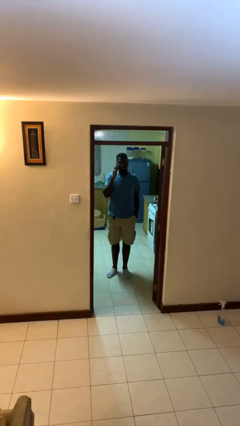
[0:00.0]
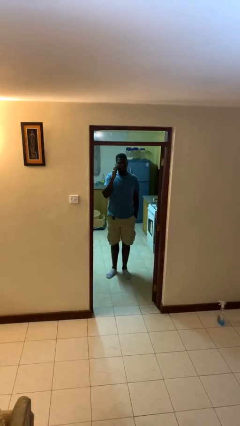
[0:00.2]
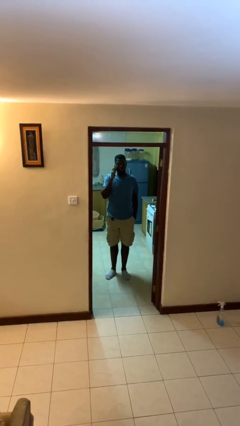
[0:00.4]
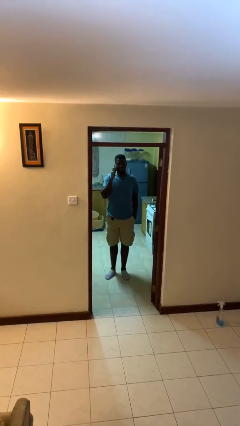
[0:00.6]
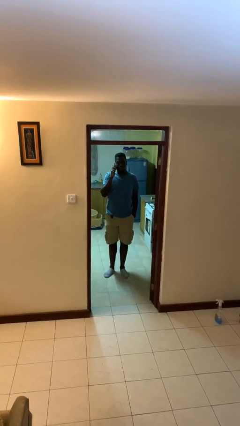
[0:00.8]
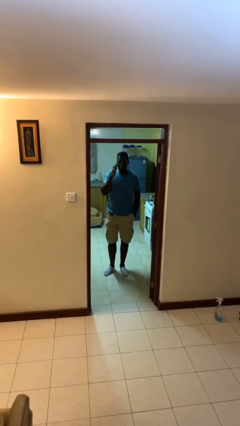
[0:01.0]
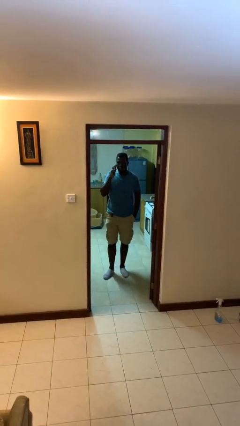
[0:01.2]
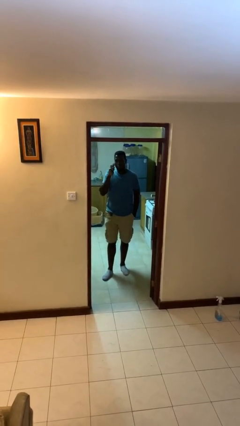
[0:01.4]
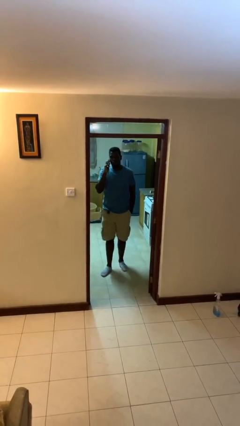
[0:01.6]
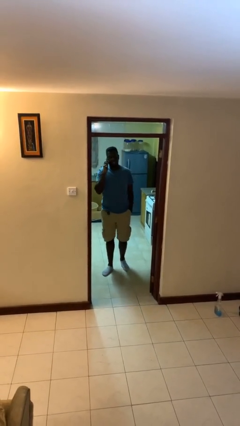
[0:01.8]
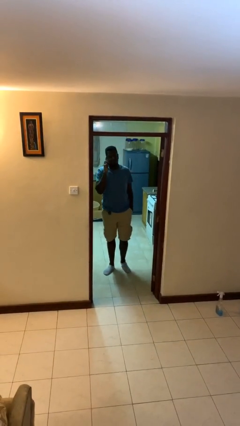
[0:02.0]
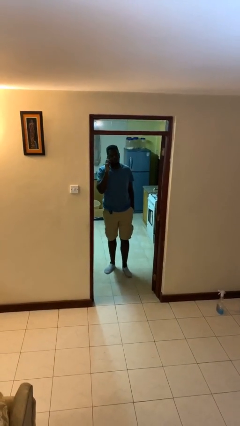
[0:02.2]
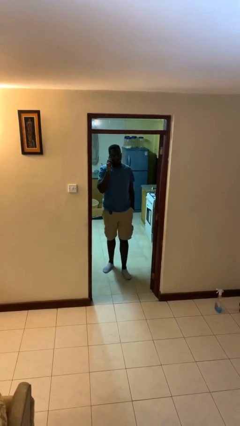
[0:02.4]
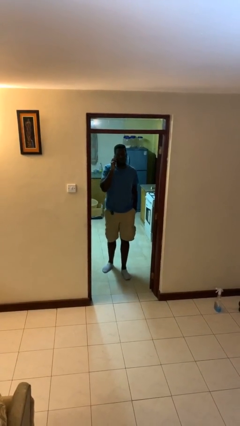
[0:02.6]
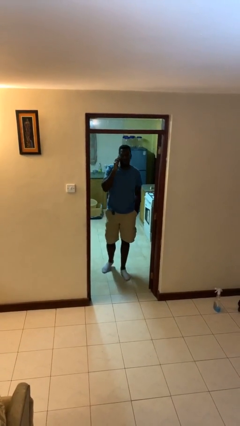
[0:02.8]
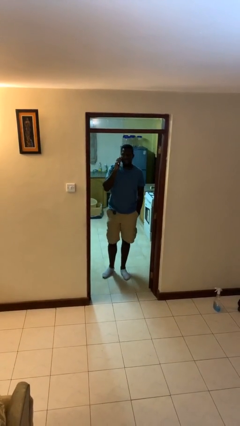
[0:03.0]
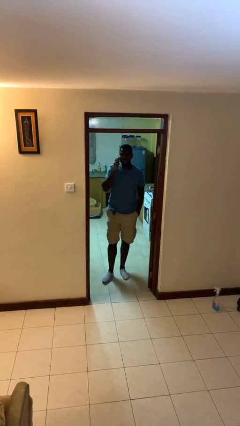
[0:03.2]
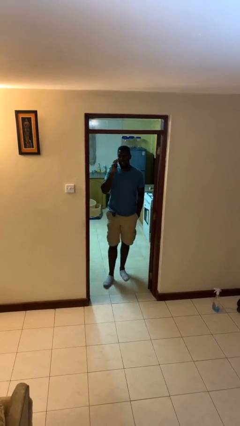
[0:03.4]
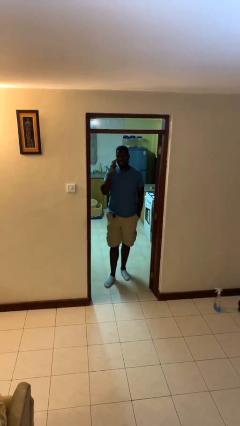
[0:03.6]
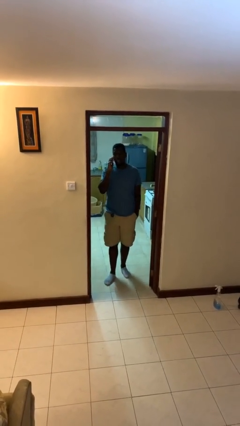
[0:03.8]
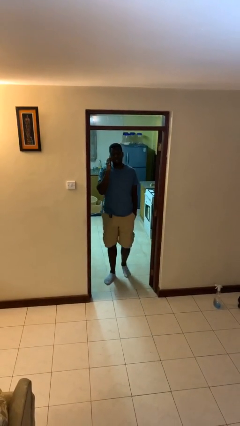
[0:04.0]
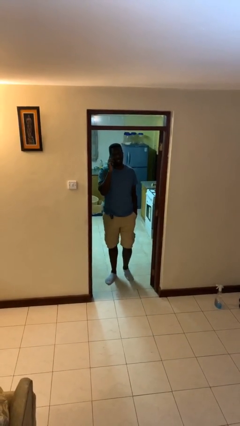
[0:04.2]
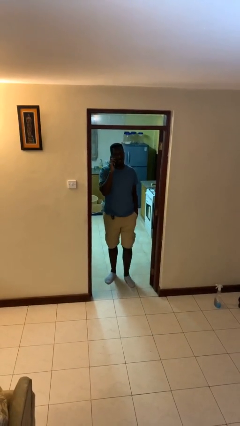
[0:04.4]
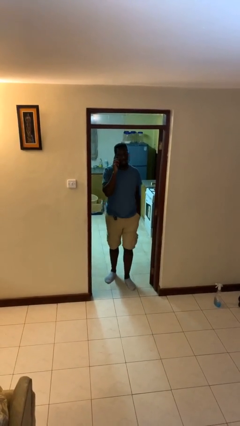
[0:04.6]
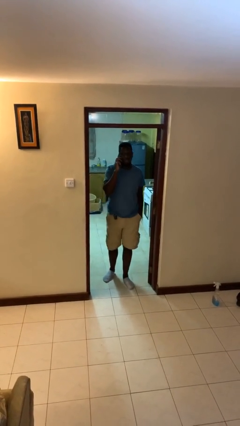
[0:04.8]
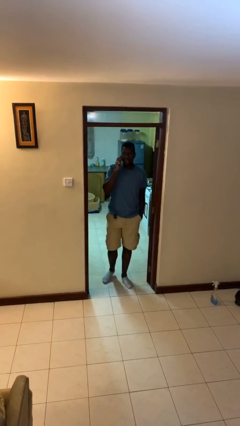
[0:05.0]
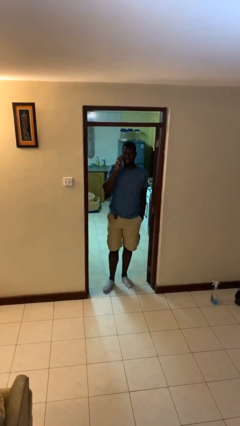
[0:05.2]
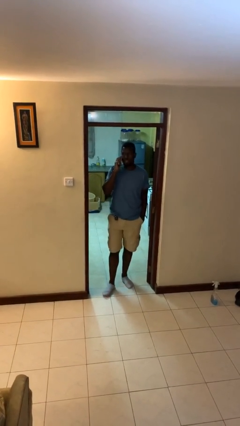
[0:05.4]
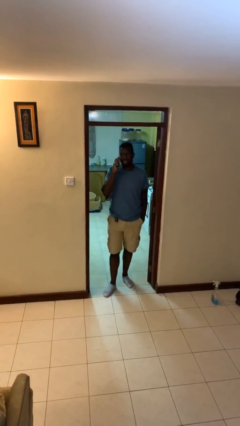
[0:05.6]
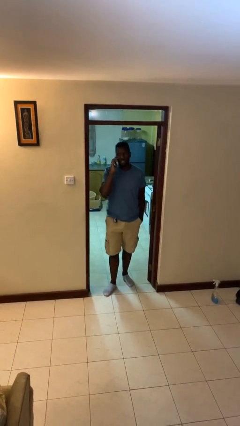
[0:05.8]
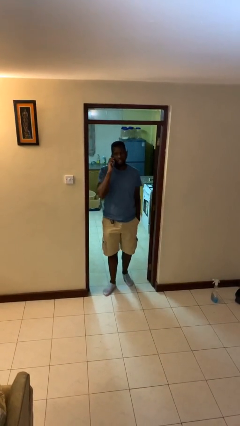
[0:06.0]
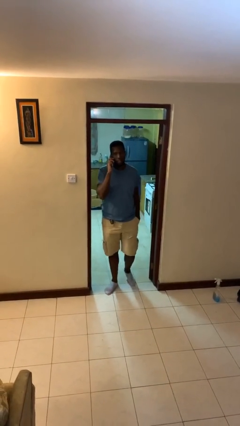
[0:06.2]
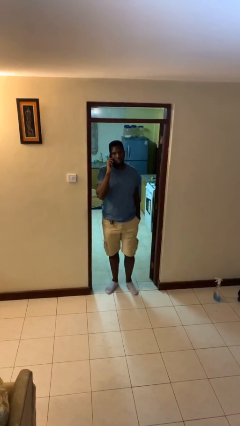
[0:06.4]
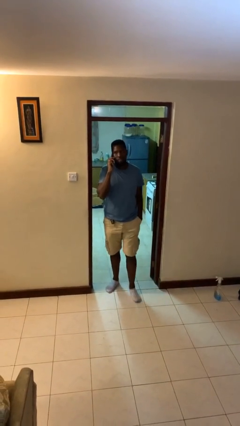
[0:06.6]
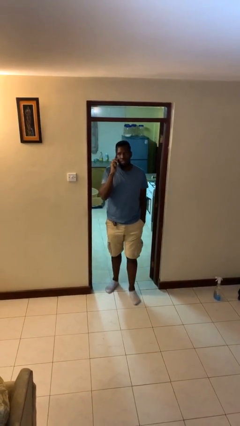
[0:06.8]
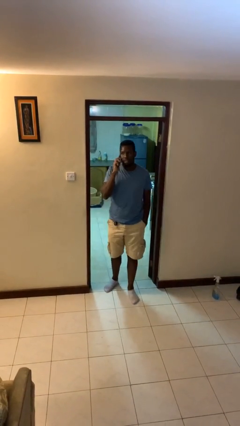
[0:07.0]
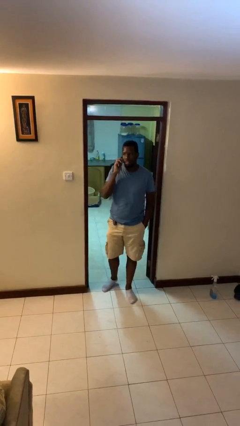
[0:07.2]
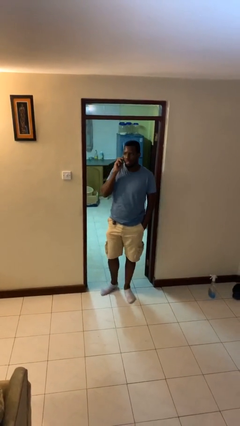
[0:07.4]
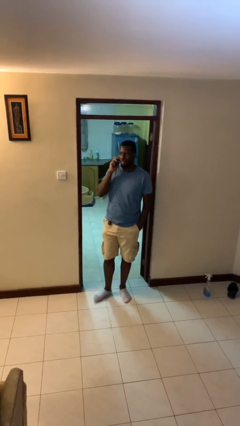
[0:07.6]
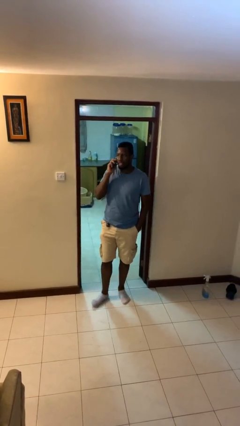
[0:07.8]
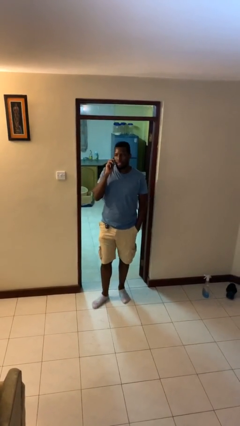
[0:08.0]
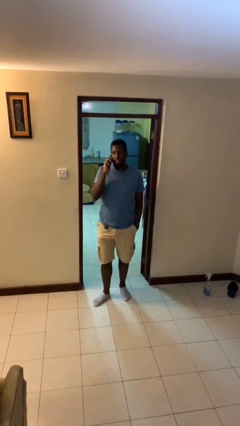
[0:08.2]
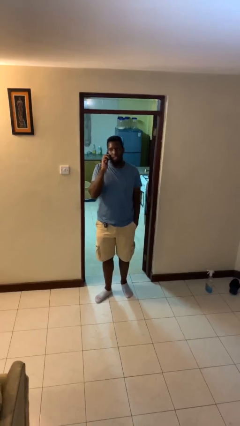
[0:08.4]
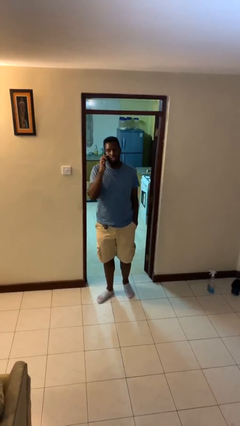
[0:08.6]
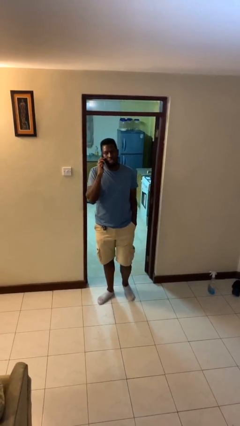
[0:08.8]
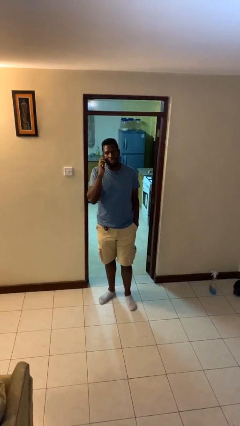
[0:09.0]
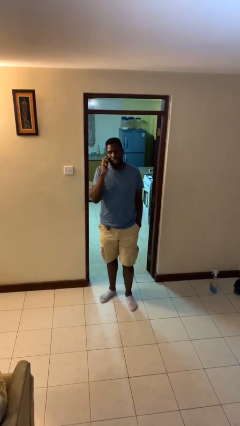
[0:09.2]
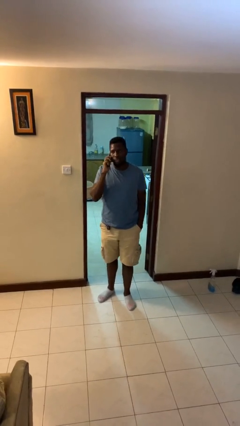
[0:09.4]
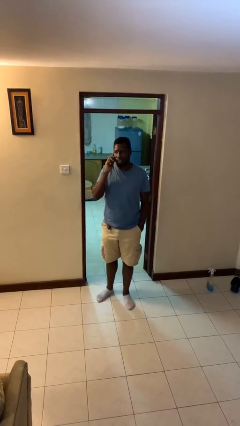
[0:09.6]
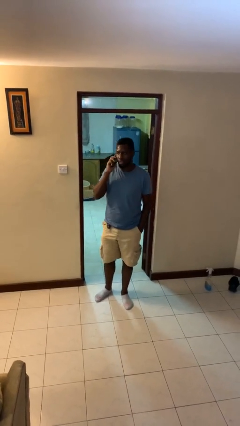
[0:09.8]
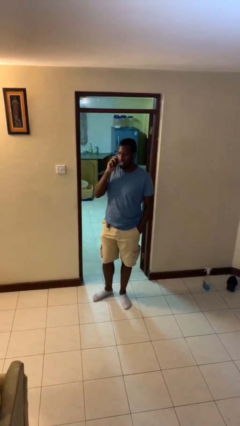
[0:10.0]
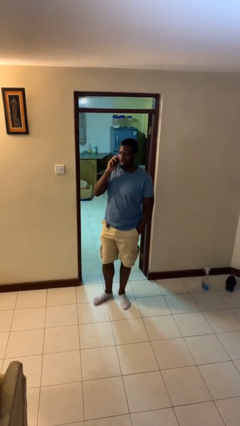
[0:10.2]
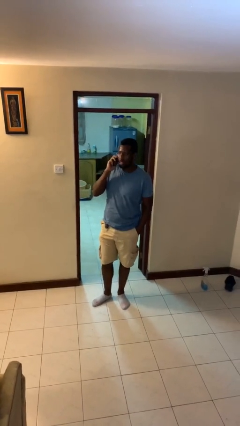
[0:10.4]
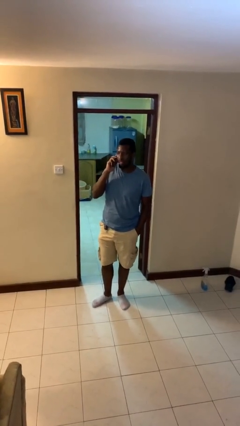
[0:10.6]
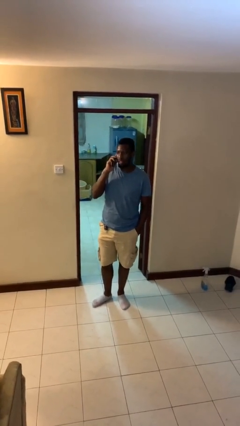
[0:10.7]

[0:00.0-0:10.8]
person enters scene through structure

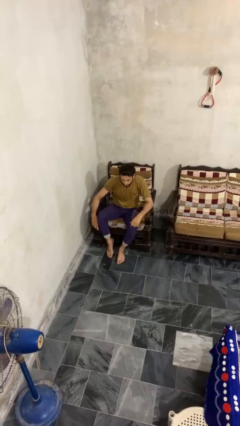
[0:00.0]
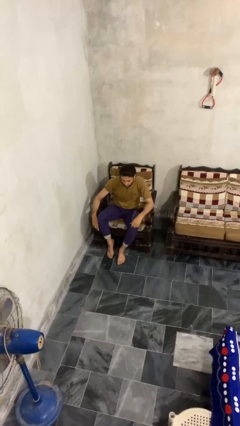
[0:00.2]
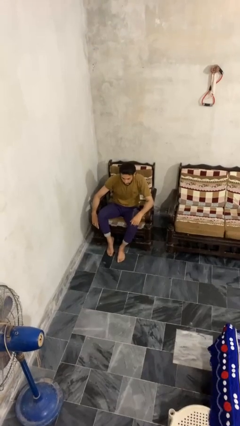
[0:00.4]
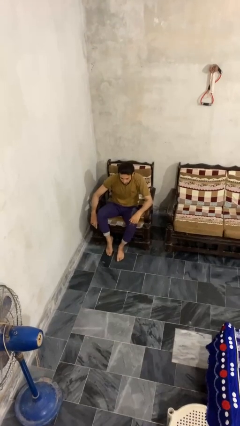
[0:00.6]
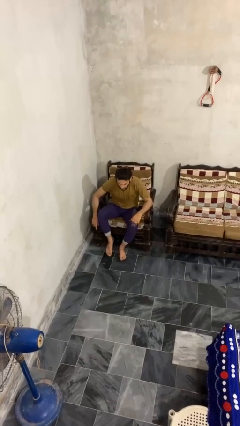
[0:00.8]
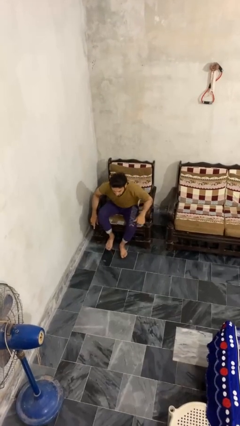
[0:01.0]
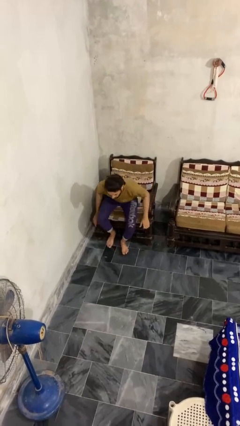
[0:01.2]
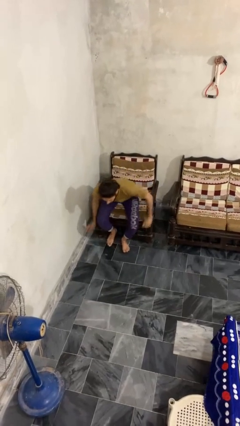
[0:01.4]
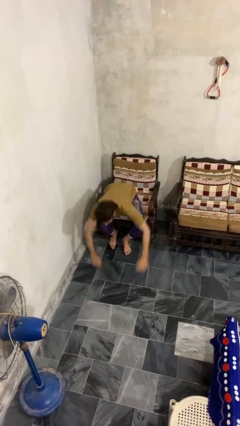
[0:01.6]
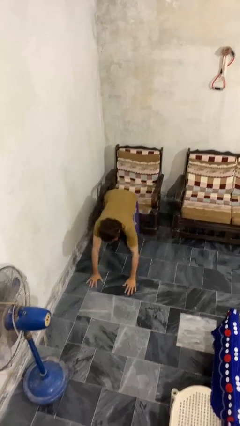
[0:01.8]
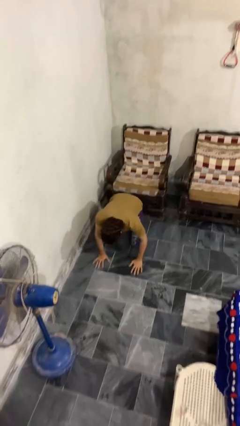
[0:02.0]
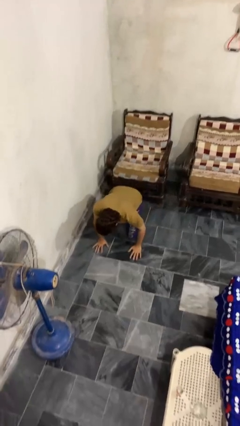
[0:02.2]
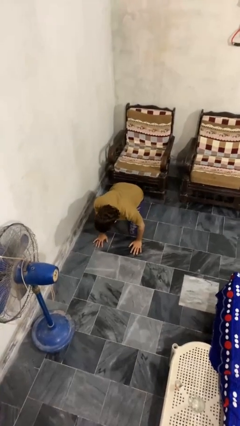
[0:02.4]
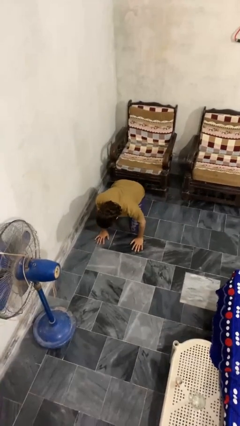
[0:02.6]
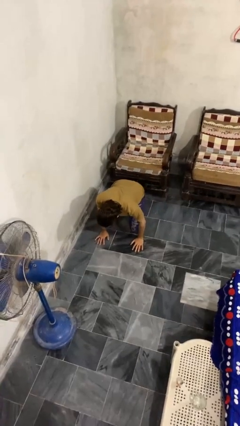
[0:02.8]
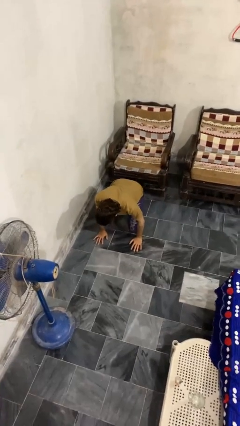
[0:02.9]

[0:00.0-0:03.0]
person falls from chair

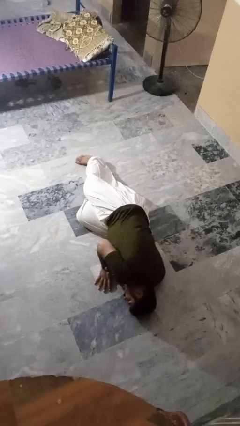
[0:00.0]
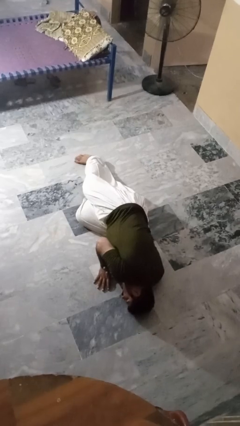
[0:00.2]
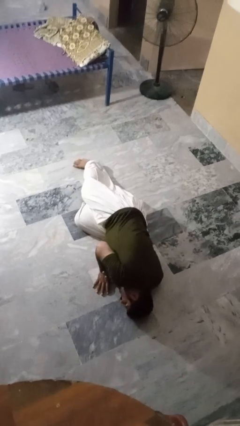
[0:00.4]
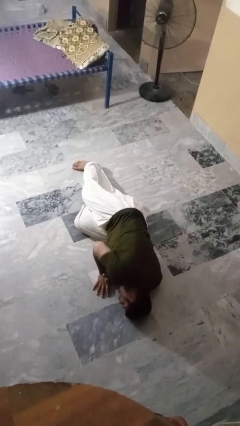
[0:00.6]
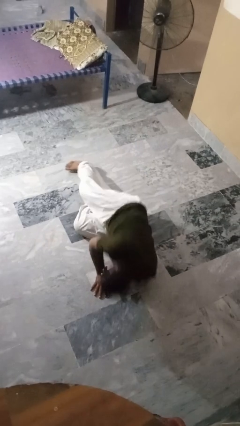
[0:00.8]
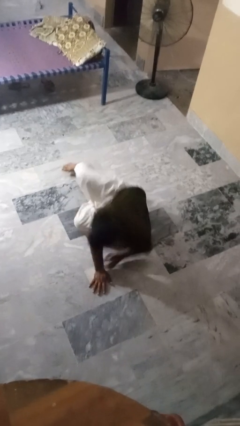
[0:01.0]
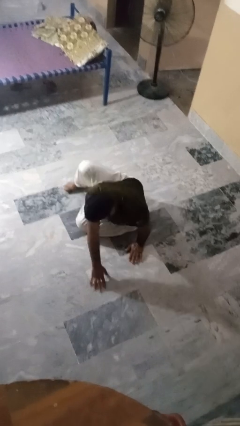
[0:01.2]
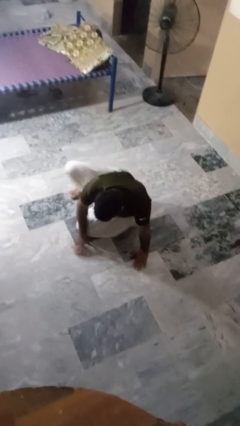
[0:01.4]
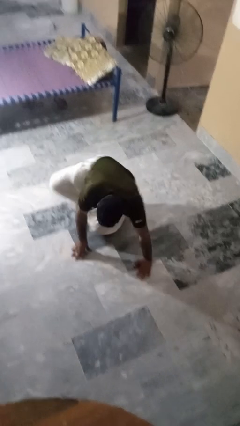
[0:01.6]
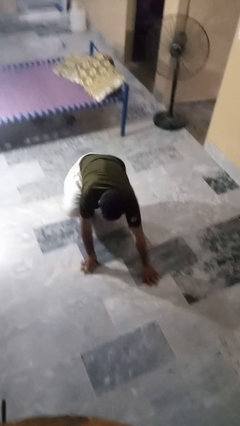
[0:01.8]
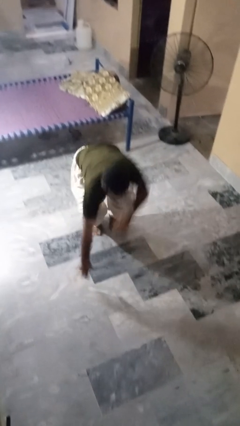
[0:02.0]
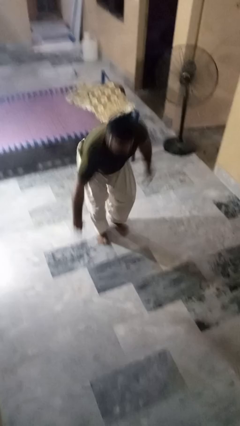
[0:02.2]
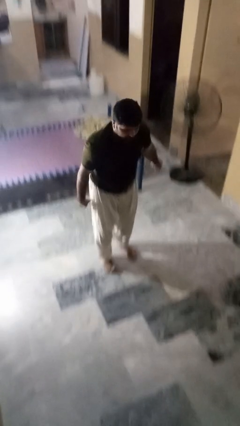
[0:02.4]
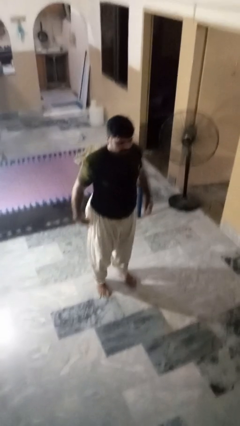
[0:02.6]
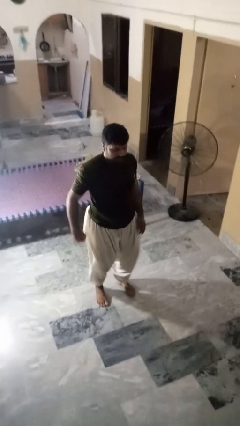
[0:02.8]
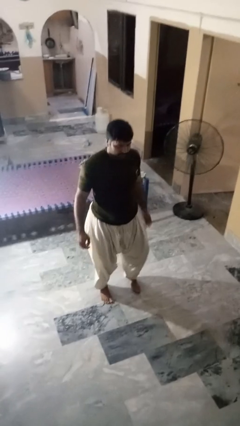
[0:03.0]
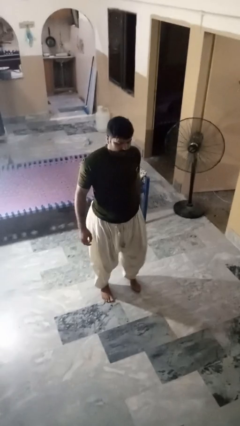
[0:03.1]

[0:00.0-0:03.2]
person stands up from floor

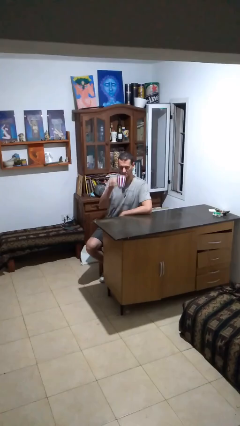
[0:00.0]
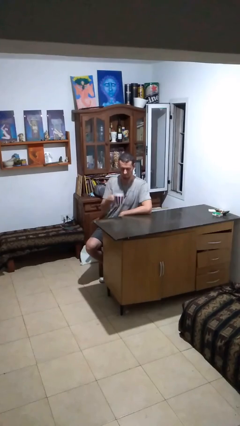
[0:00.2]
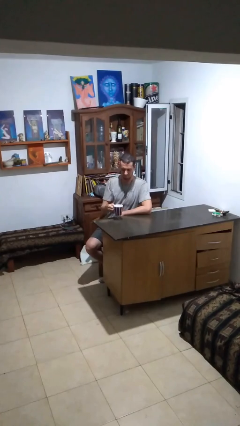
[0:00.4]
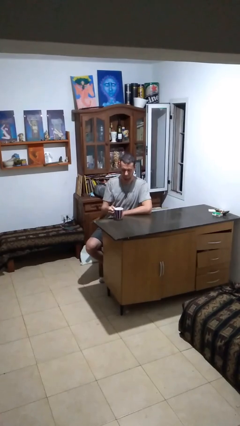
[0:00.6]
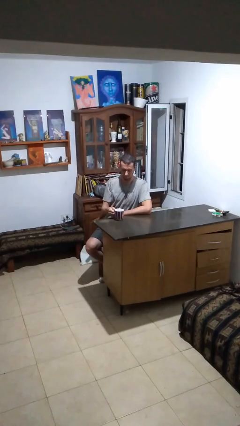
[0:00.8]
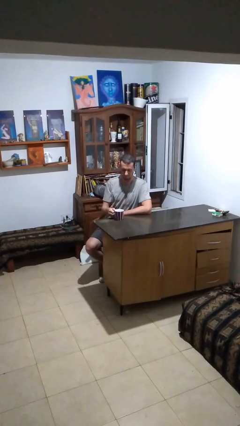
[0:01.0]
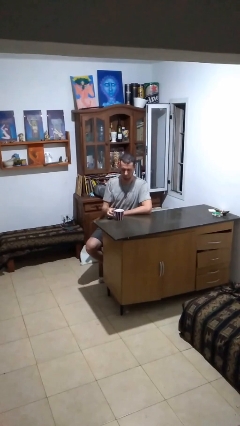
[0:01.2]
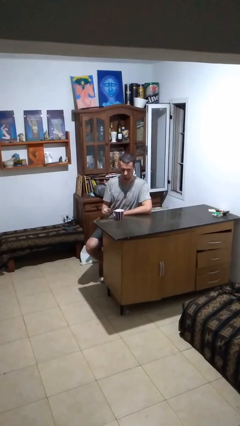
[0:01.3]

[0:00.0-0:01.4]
person puts down object on table
